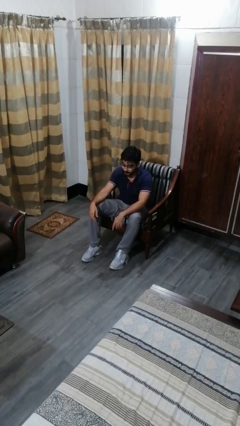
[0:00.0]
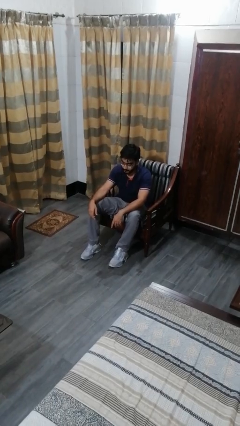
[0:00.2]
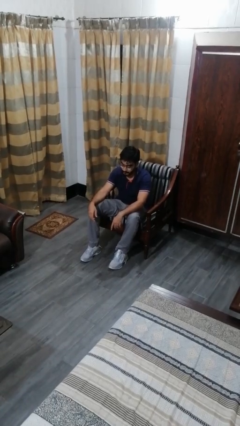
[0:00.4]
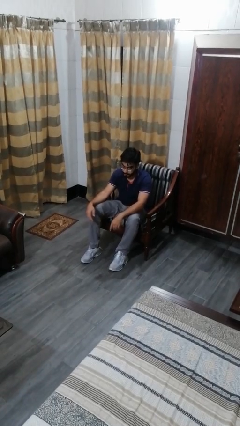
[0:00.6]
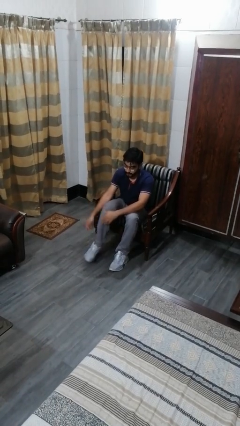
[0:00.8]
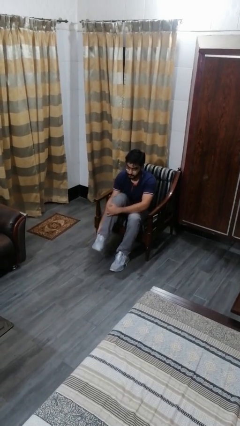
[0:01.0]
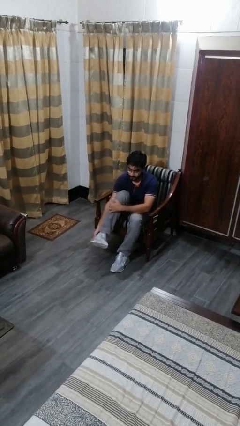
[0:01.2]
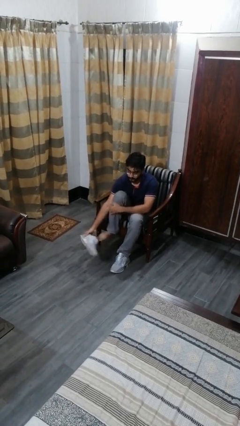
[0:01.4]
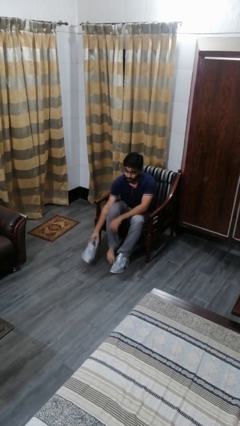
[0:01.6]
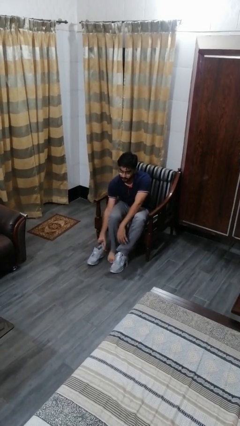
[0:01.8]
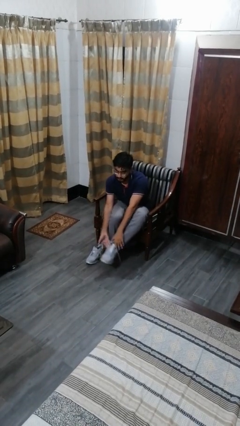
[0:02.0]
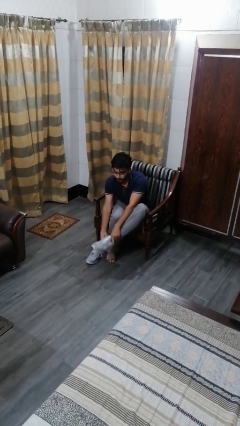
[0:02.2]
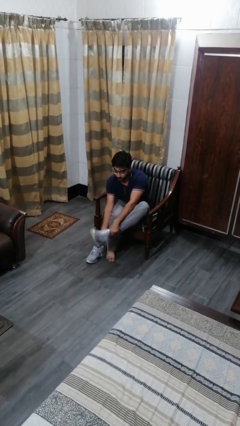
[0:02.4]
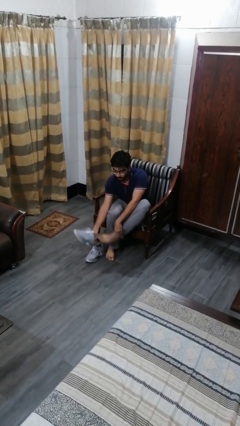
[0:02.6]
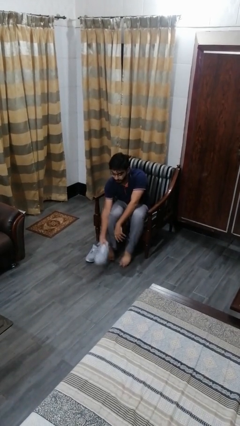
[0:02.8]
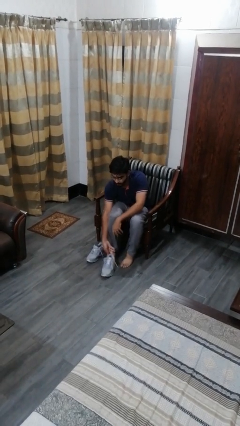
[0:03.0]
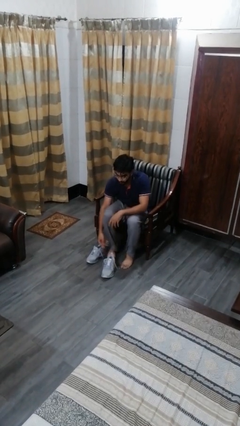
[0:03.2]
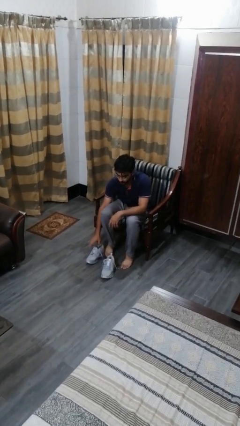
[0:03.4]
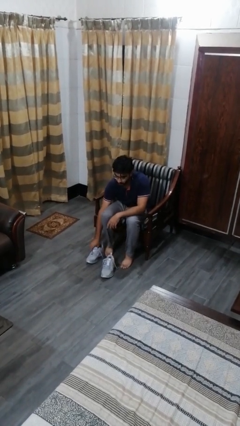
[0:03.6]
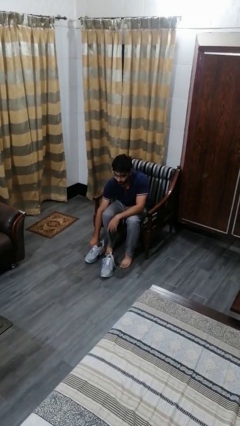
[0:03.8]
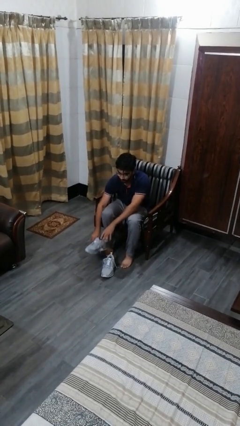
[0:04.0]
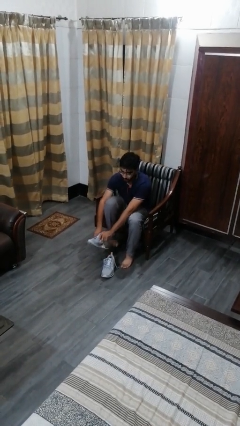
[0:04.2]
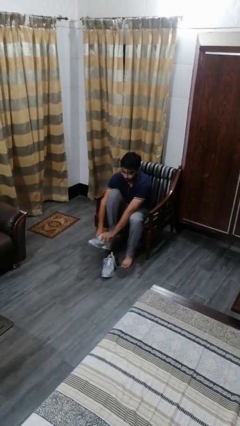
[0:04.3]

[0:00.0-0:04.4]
person takes off shoes

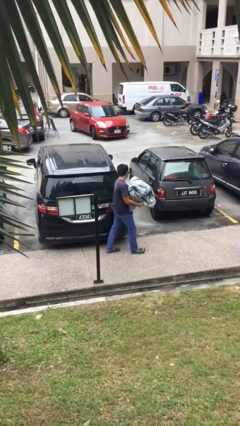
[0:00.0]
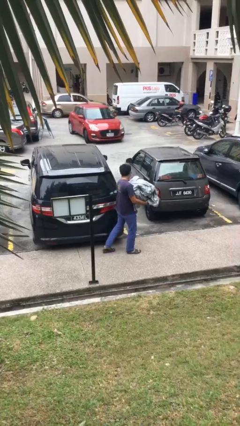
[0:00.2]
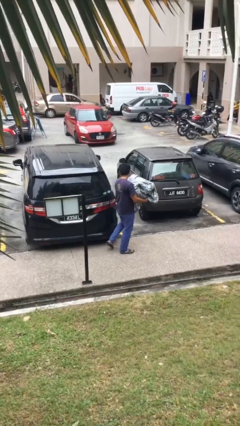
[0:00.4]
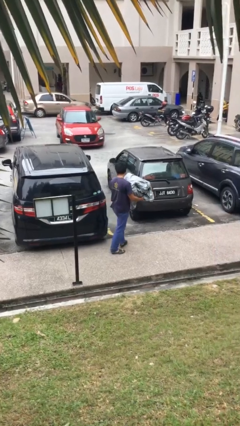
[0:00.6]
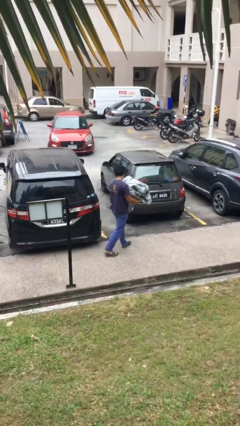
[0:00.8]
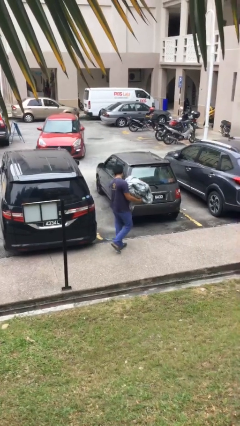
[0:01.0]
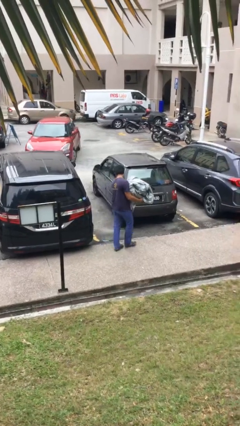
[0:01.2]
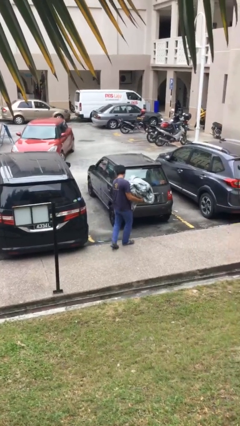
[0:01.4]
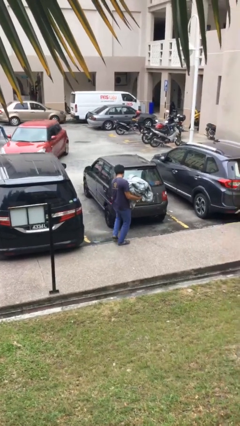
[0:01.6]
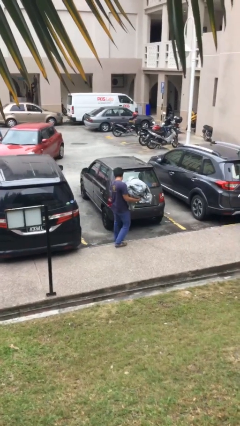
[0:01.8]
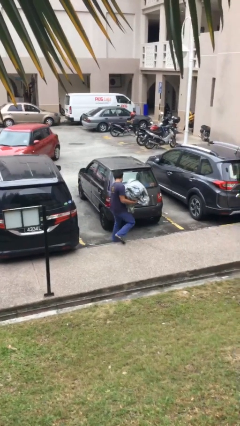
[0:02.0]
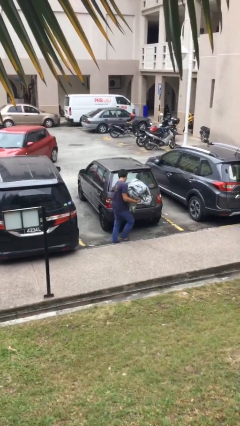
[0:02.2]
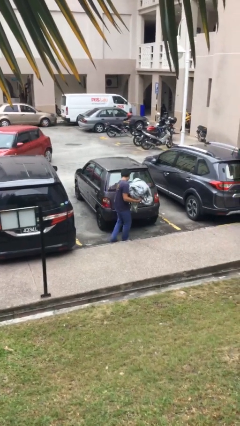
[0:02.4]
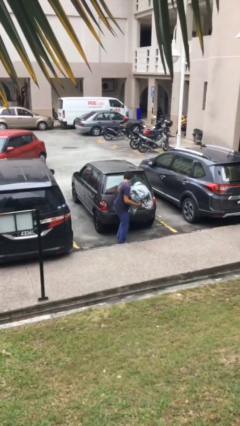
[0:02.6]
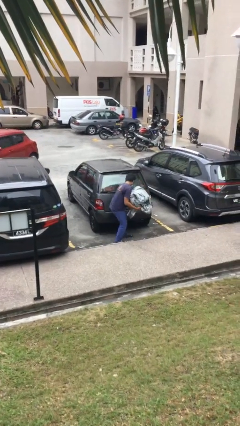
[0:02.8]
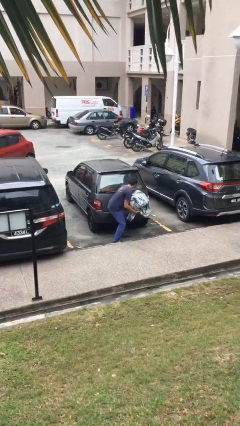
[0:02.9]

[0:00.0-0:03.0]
person carries heavy object

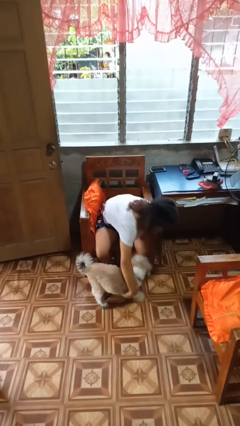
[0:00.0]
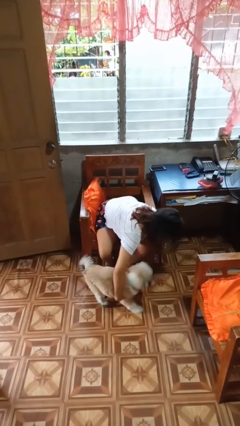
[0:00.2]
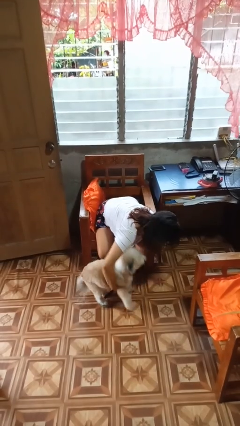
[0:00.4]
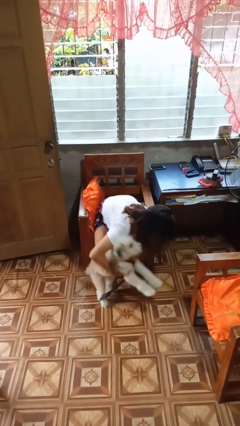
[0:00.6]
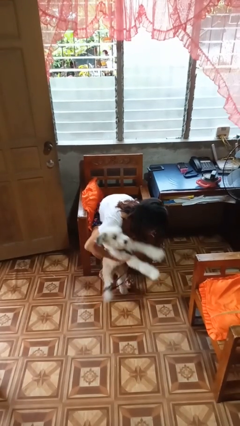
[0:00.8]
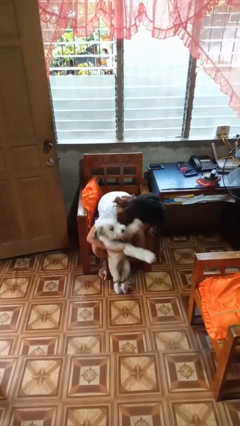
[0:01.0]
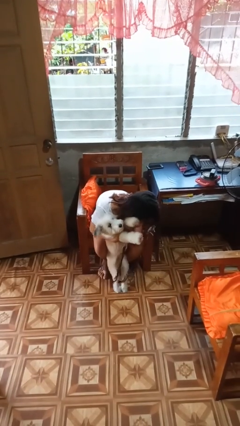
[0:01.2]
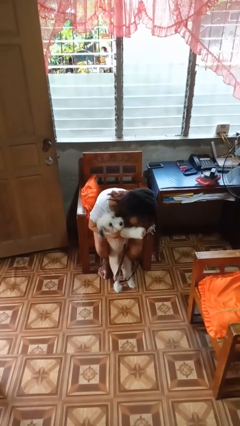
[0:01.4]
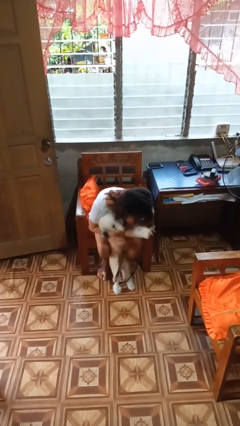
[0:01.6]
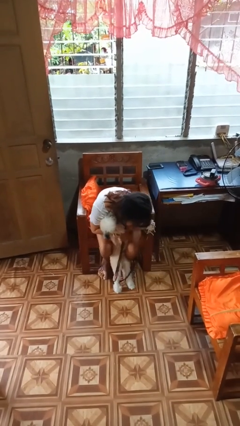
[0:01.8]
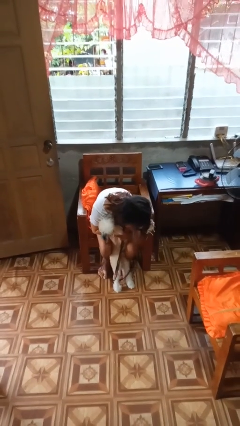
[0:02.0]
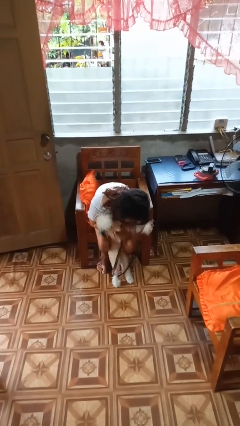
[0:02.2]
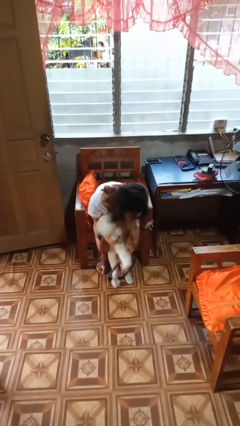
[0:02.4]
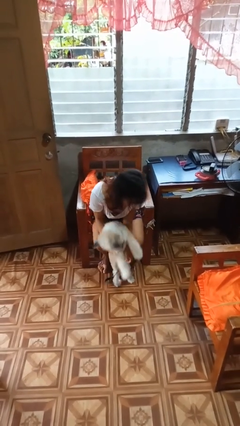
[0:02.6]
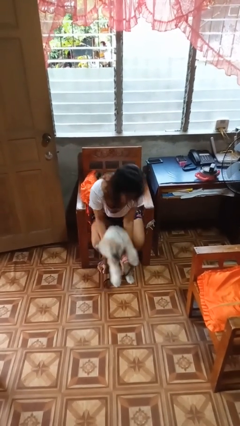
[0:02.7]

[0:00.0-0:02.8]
person hugs dog

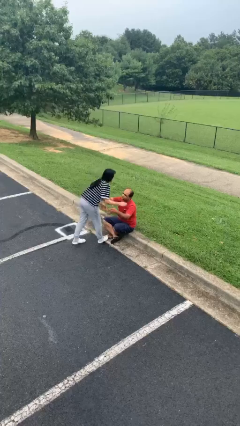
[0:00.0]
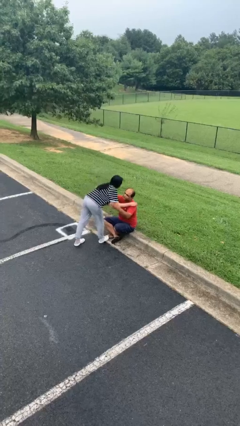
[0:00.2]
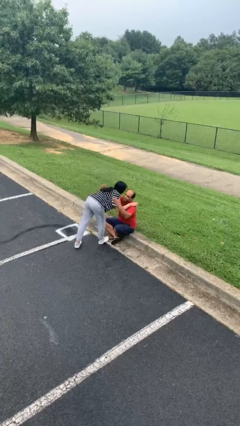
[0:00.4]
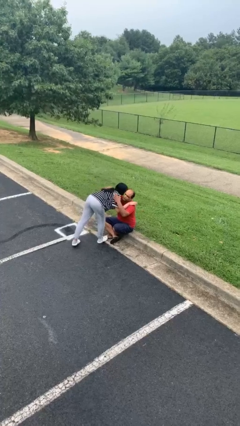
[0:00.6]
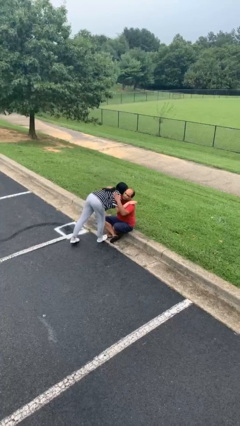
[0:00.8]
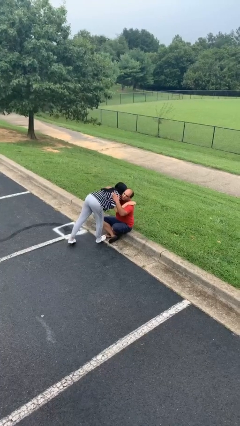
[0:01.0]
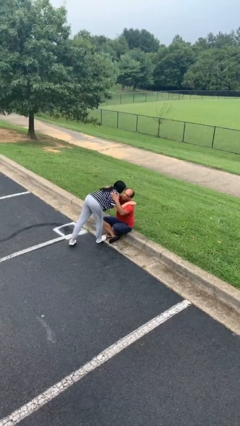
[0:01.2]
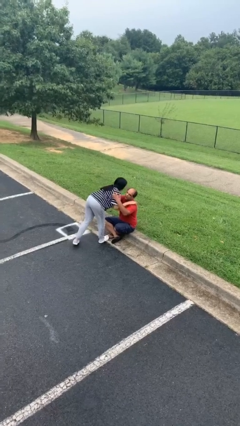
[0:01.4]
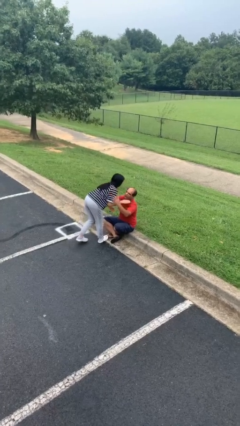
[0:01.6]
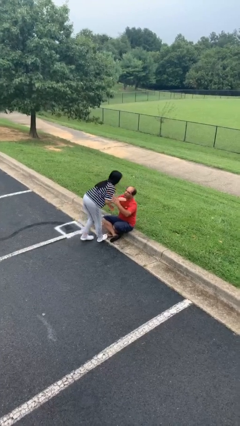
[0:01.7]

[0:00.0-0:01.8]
person embraces person

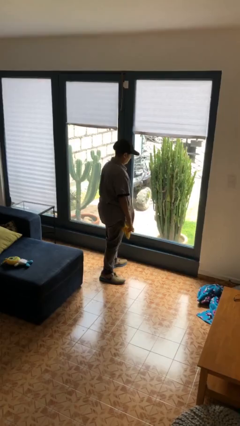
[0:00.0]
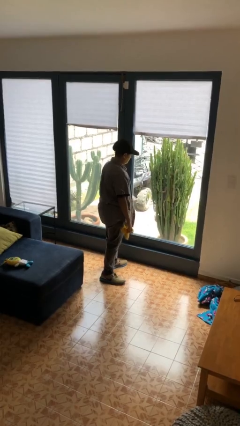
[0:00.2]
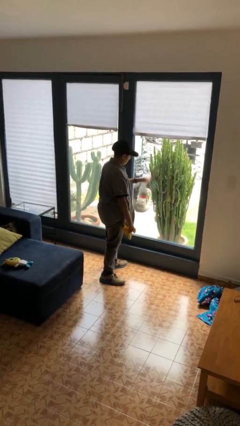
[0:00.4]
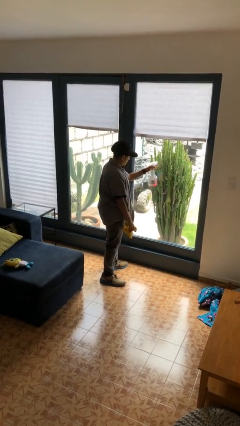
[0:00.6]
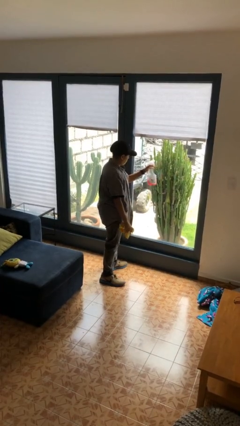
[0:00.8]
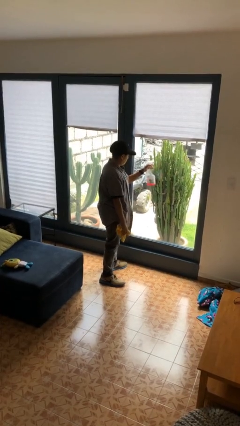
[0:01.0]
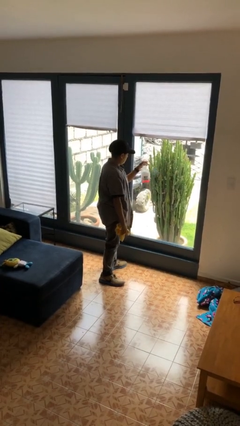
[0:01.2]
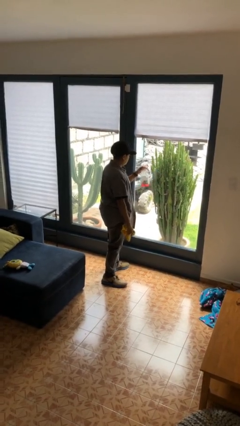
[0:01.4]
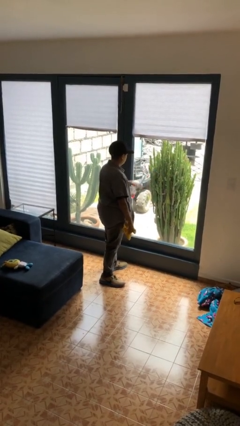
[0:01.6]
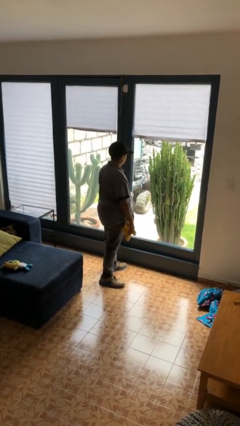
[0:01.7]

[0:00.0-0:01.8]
person sprays from bottle

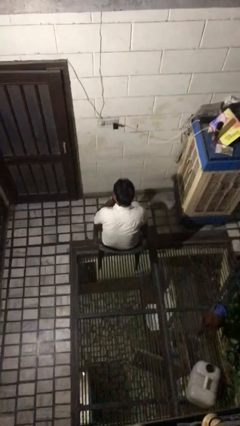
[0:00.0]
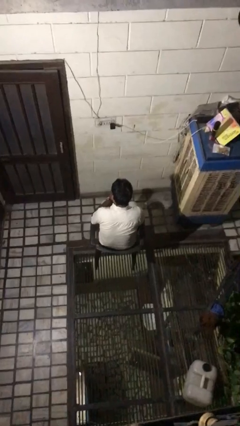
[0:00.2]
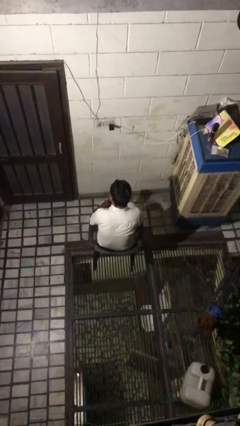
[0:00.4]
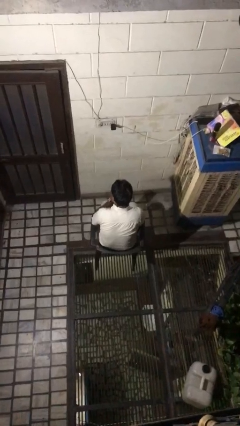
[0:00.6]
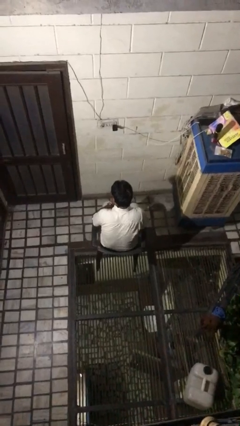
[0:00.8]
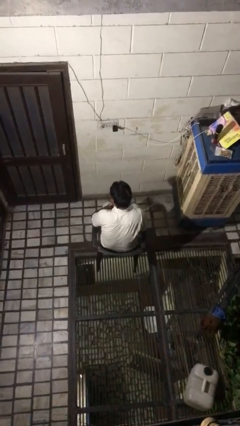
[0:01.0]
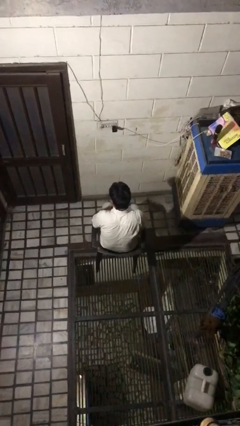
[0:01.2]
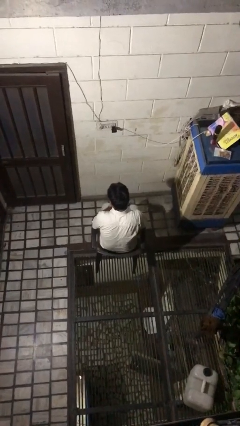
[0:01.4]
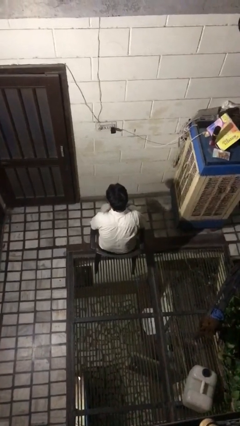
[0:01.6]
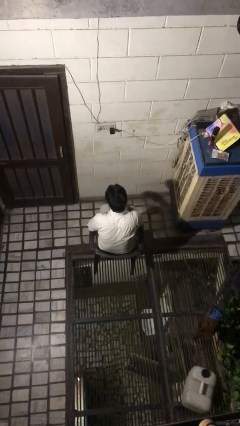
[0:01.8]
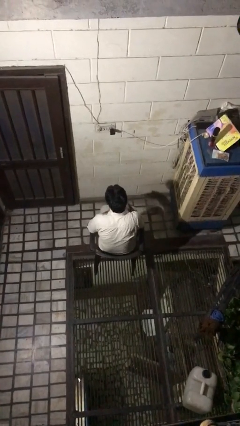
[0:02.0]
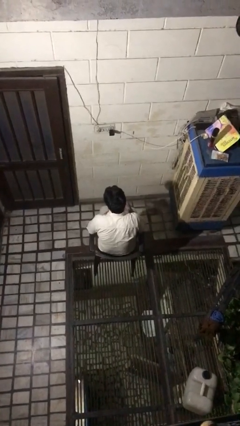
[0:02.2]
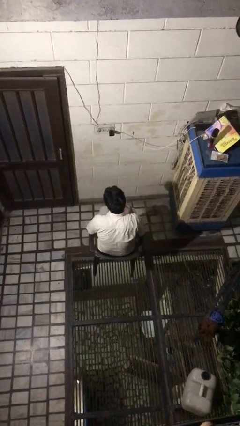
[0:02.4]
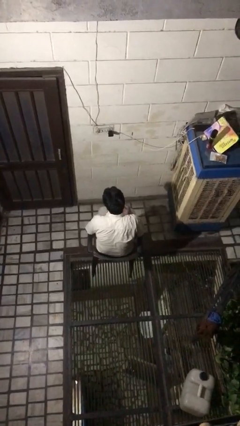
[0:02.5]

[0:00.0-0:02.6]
person takes off wristwatch

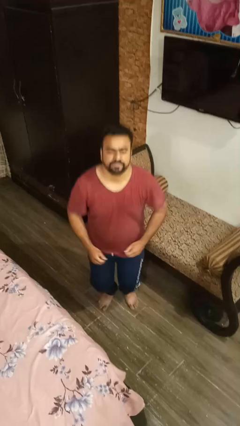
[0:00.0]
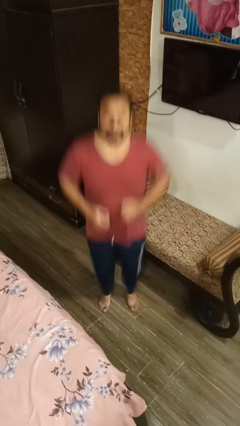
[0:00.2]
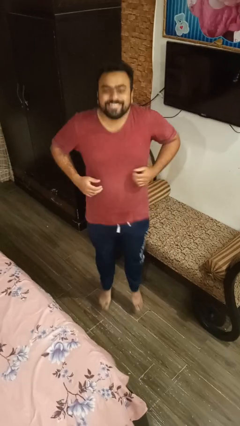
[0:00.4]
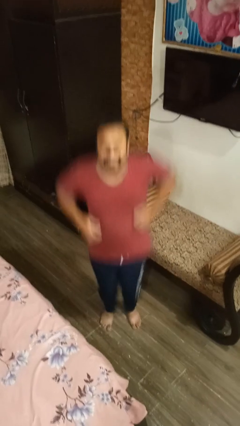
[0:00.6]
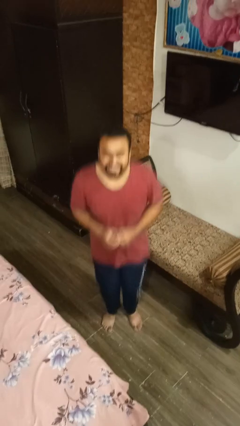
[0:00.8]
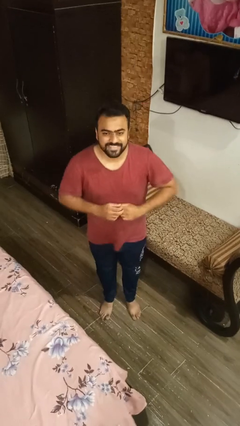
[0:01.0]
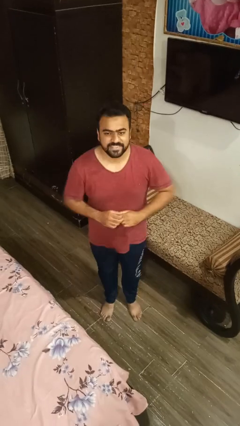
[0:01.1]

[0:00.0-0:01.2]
person jumps
